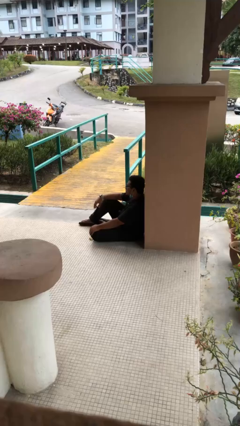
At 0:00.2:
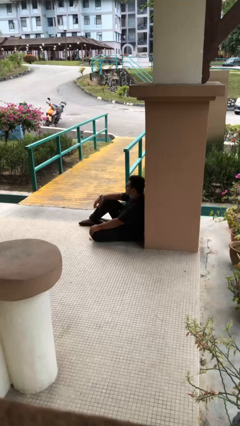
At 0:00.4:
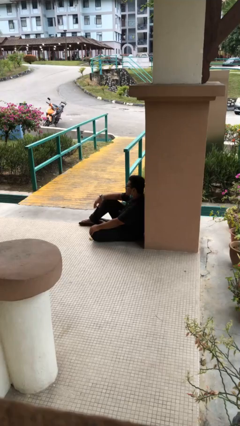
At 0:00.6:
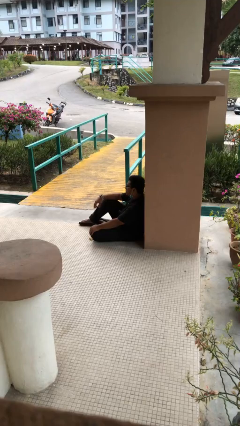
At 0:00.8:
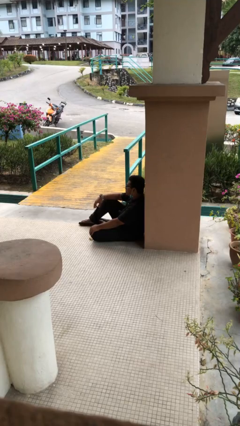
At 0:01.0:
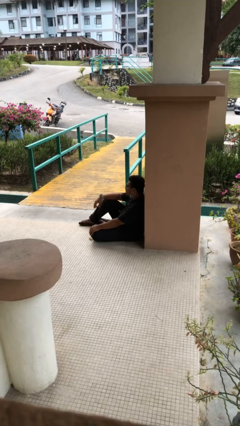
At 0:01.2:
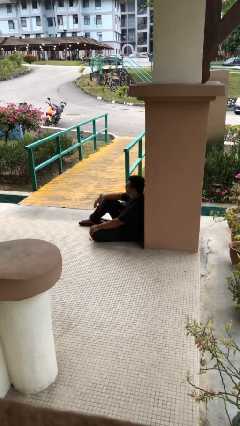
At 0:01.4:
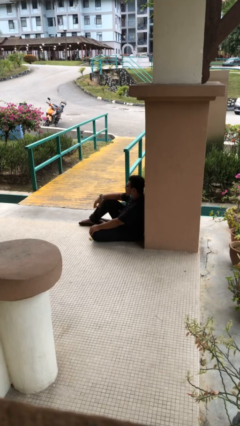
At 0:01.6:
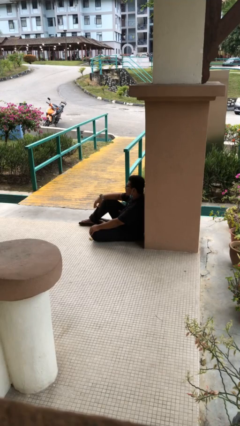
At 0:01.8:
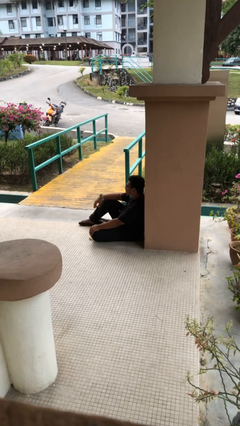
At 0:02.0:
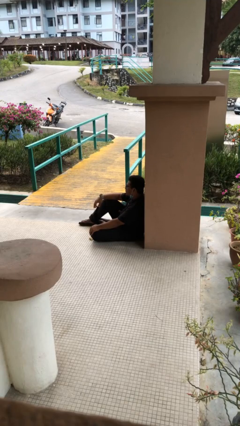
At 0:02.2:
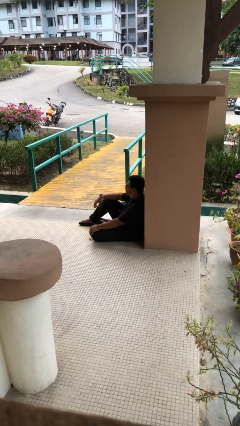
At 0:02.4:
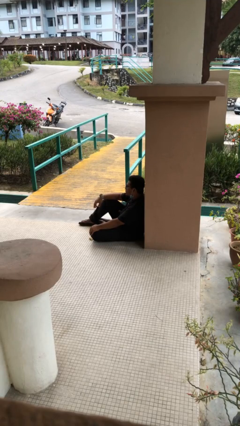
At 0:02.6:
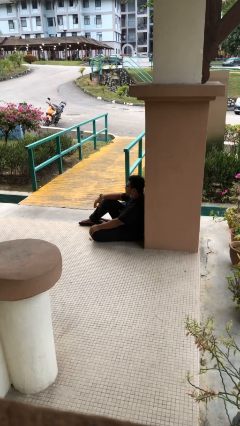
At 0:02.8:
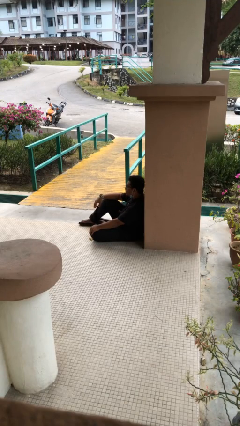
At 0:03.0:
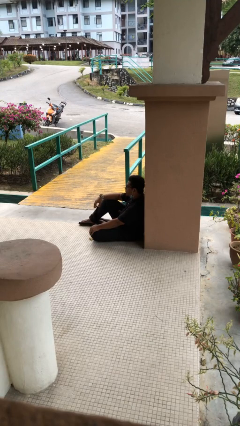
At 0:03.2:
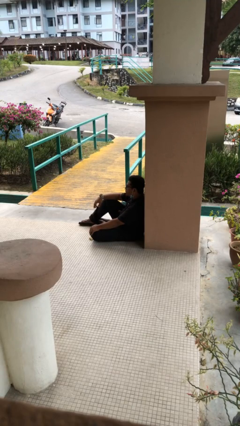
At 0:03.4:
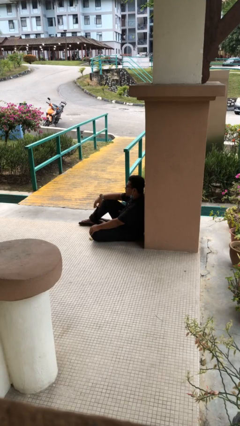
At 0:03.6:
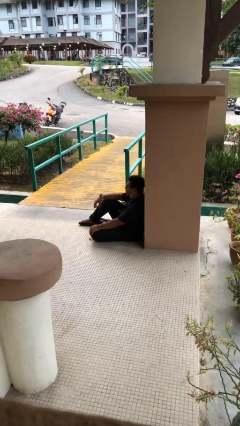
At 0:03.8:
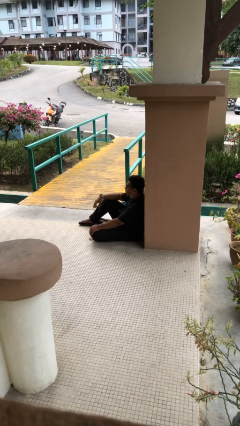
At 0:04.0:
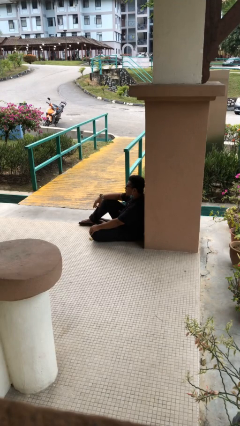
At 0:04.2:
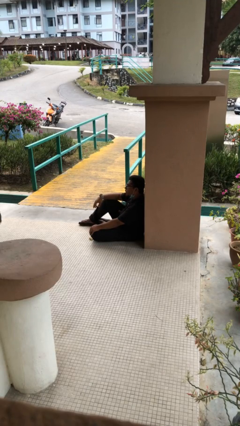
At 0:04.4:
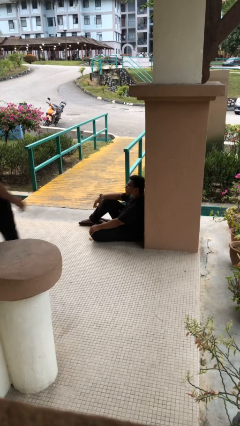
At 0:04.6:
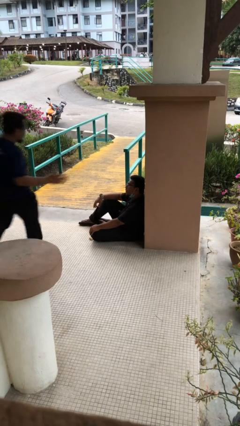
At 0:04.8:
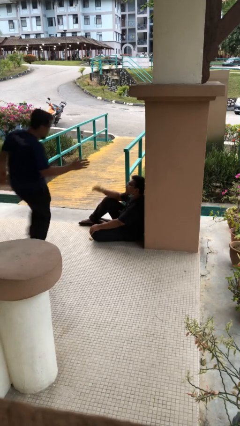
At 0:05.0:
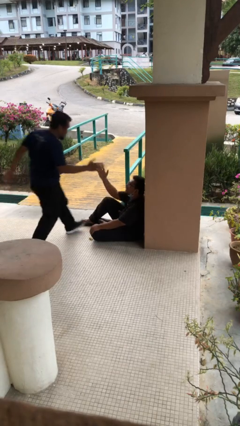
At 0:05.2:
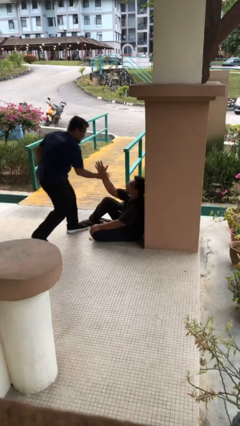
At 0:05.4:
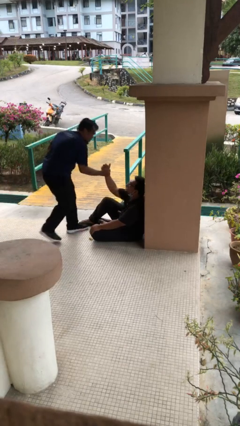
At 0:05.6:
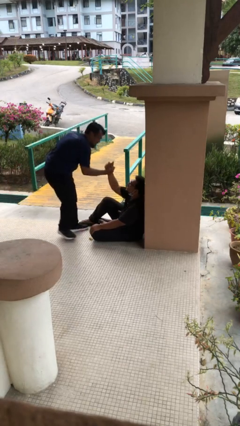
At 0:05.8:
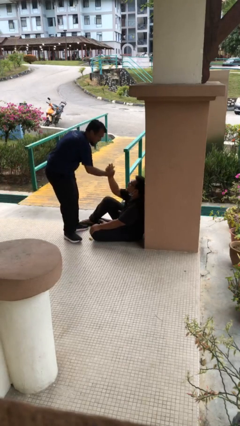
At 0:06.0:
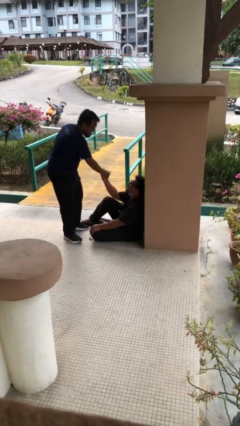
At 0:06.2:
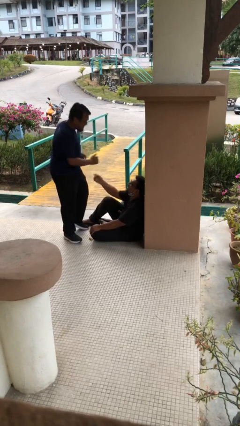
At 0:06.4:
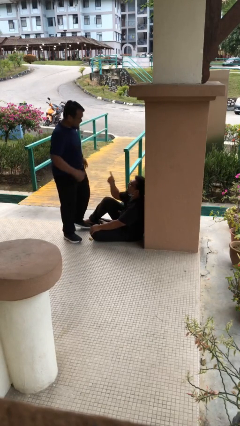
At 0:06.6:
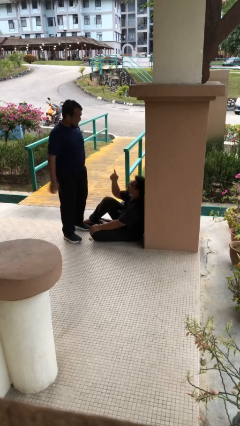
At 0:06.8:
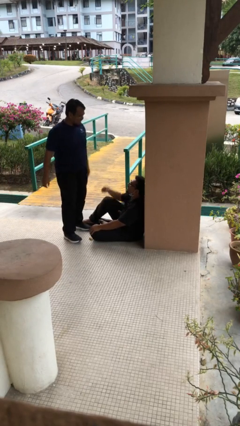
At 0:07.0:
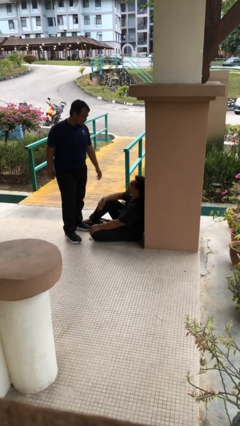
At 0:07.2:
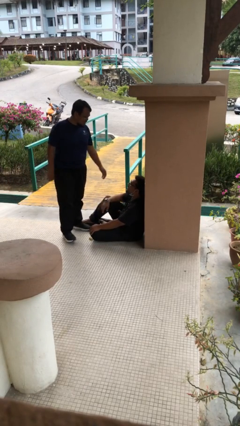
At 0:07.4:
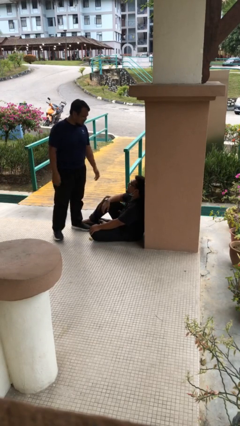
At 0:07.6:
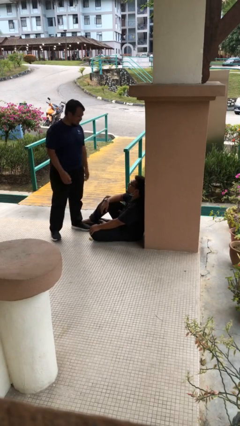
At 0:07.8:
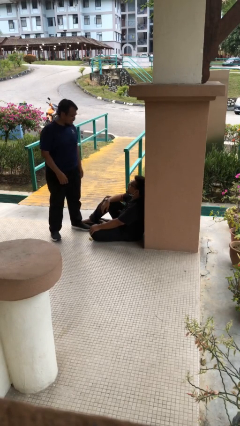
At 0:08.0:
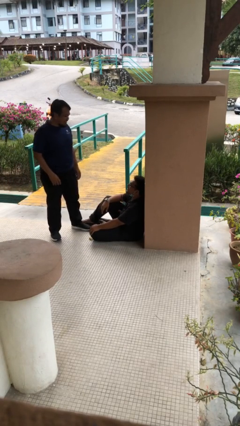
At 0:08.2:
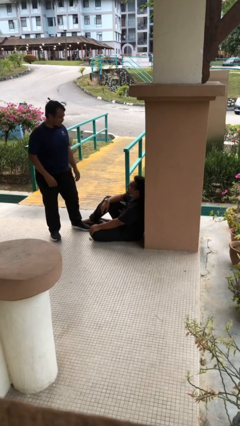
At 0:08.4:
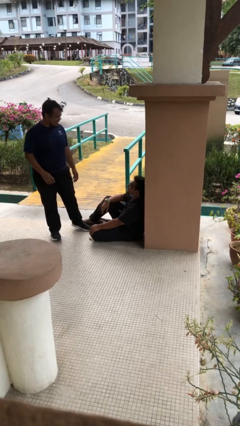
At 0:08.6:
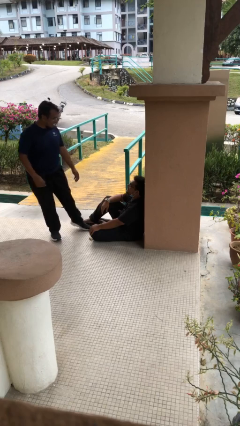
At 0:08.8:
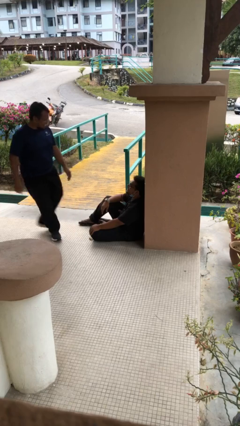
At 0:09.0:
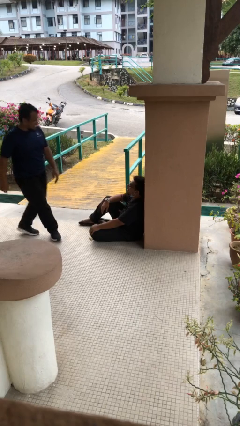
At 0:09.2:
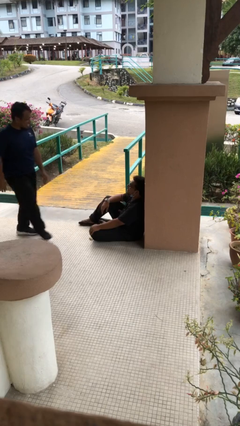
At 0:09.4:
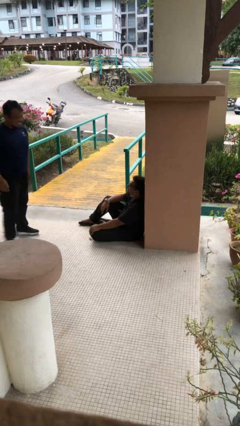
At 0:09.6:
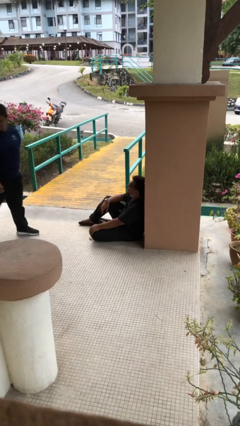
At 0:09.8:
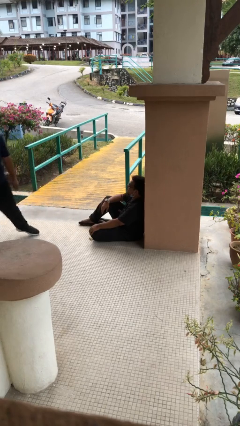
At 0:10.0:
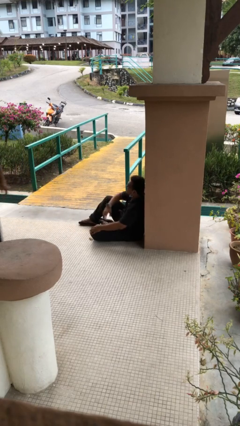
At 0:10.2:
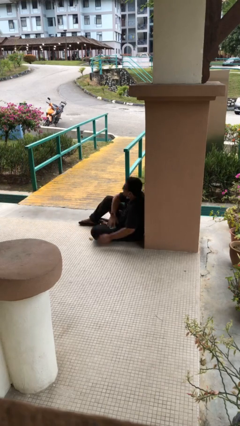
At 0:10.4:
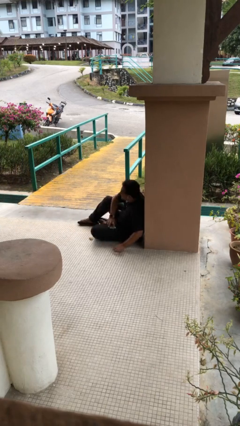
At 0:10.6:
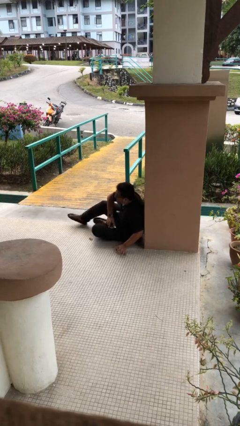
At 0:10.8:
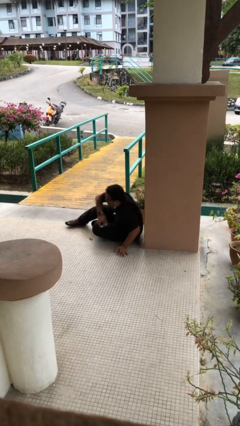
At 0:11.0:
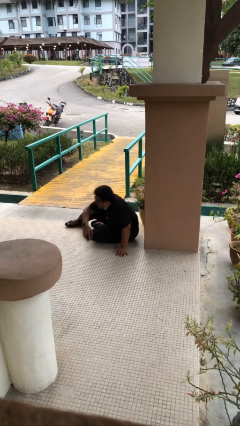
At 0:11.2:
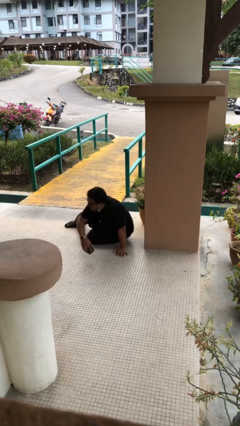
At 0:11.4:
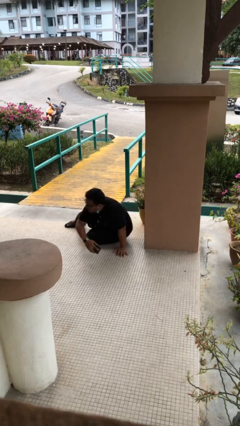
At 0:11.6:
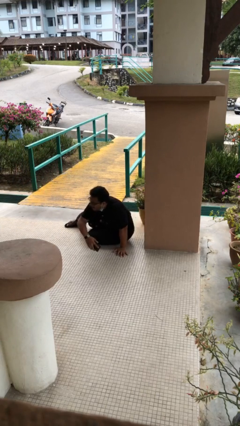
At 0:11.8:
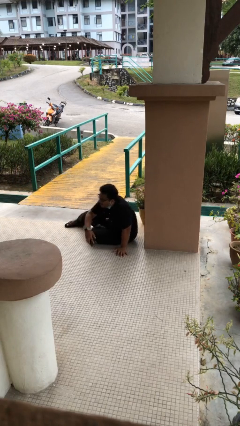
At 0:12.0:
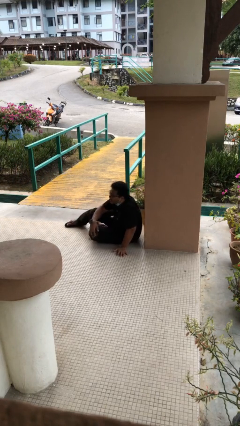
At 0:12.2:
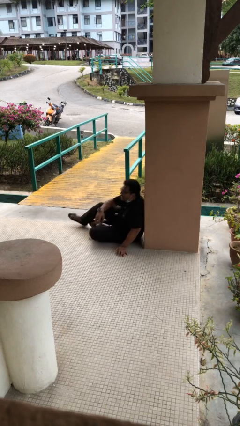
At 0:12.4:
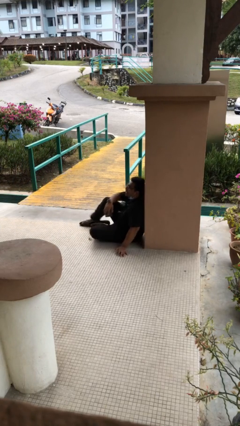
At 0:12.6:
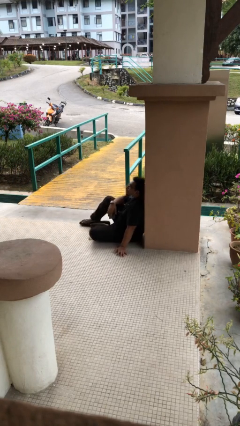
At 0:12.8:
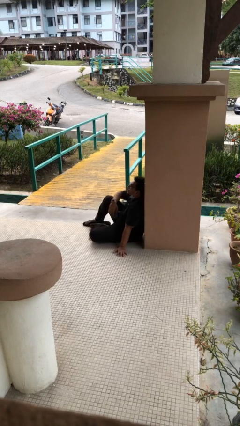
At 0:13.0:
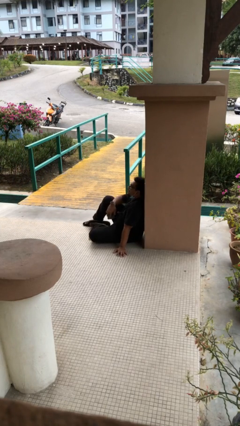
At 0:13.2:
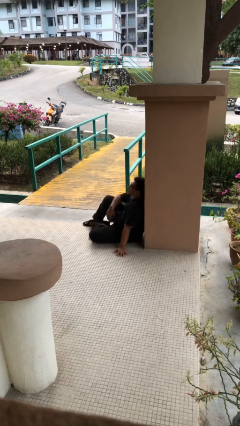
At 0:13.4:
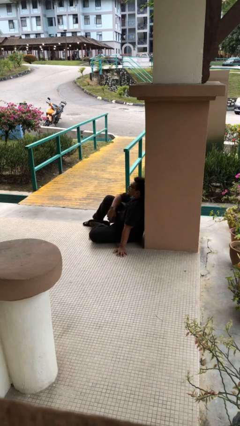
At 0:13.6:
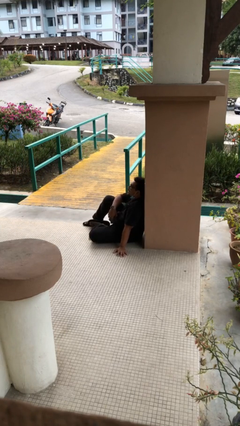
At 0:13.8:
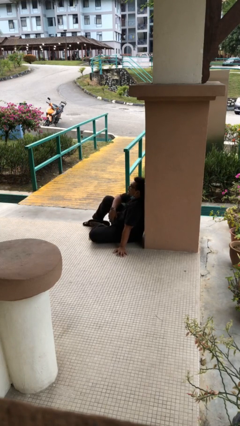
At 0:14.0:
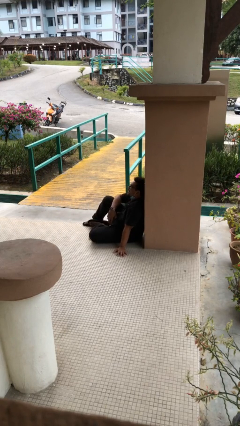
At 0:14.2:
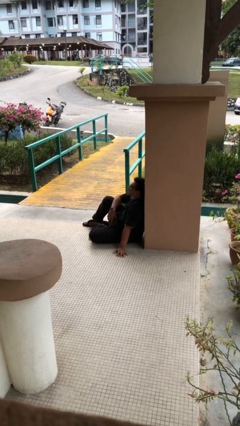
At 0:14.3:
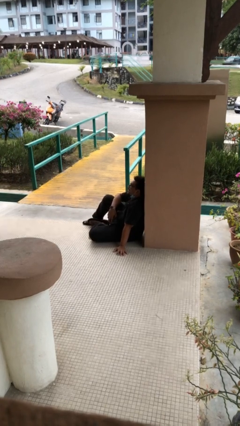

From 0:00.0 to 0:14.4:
person shakes hand

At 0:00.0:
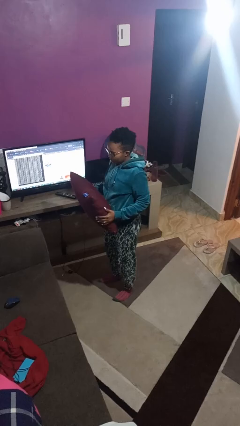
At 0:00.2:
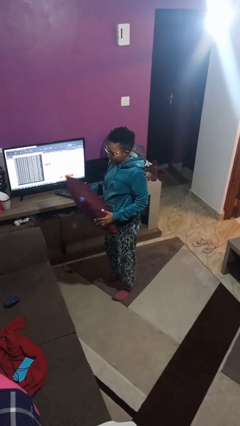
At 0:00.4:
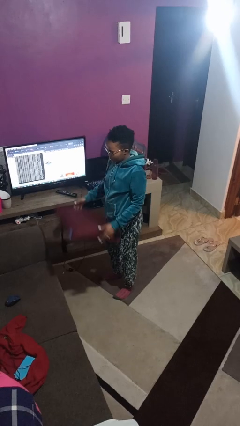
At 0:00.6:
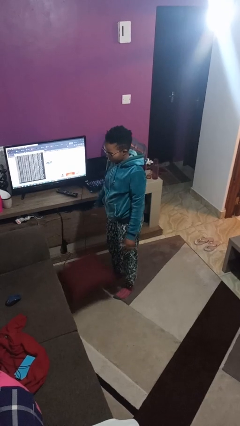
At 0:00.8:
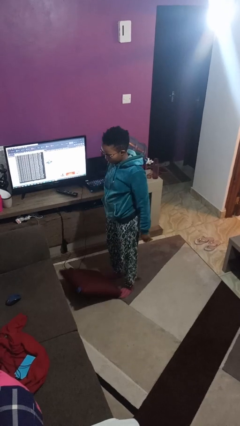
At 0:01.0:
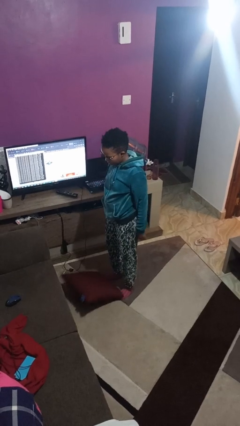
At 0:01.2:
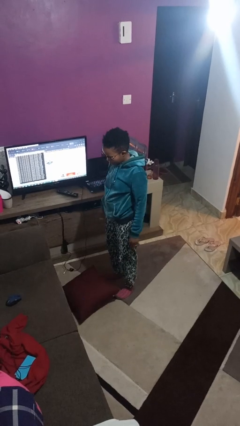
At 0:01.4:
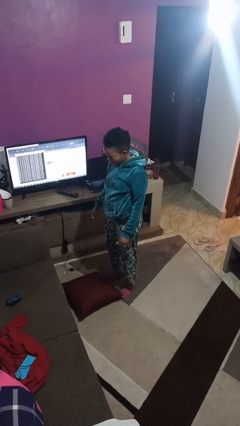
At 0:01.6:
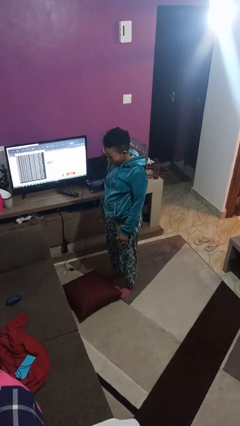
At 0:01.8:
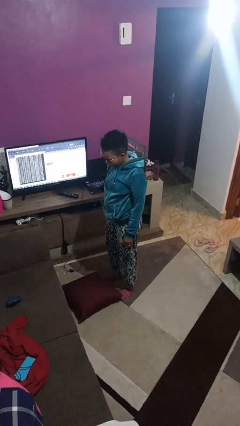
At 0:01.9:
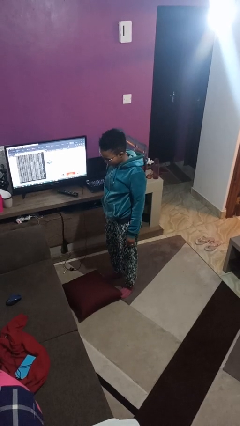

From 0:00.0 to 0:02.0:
person throws object to ground

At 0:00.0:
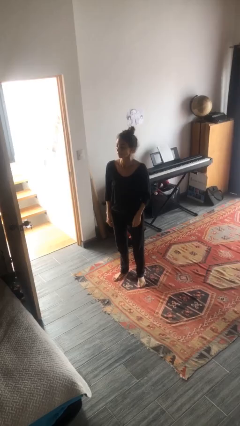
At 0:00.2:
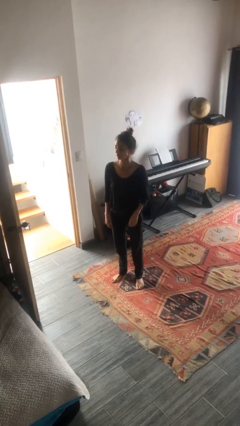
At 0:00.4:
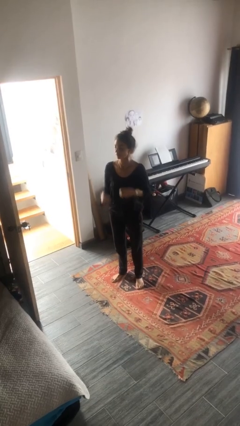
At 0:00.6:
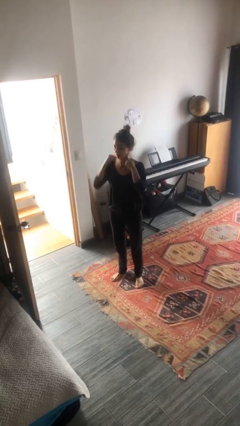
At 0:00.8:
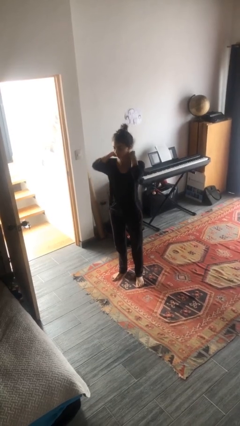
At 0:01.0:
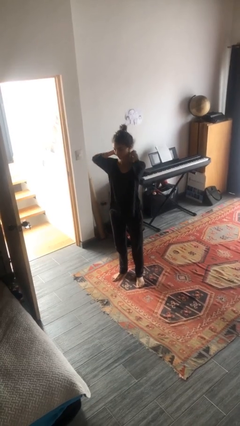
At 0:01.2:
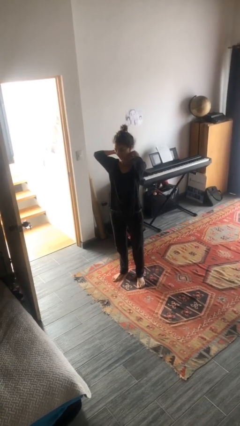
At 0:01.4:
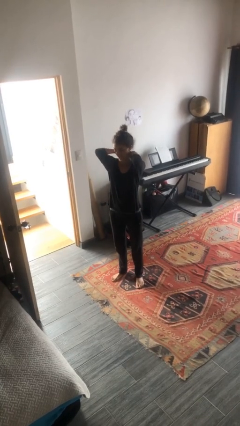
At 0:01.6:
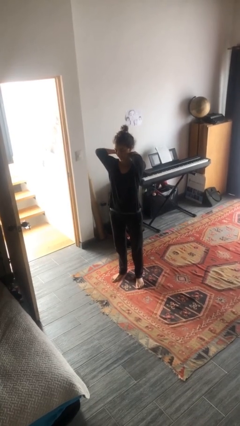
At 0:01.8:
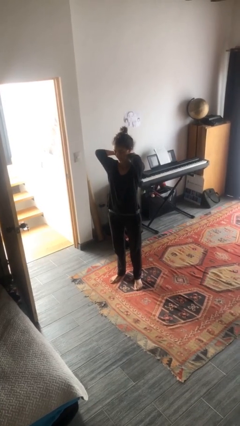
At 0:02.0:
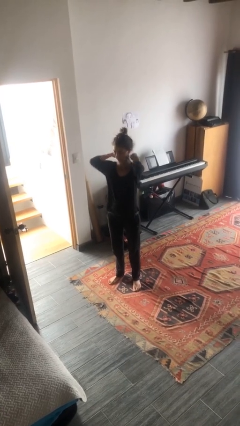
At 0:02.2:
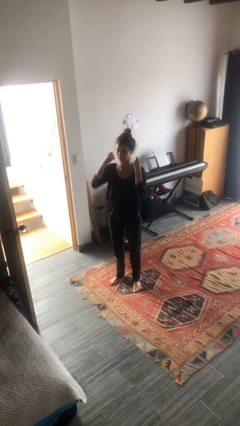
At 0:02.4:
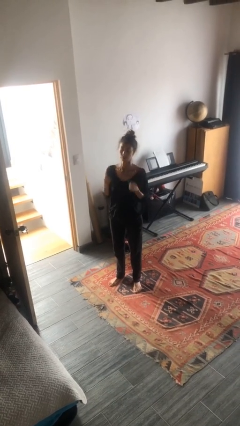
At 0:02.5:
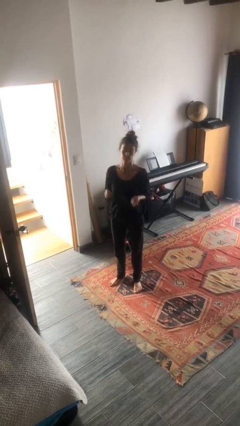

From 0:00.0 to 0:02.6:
person takes off necklace
